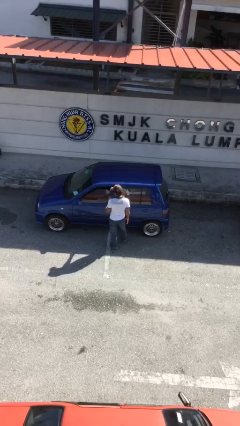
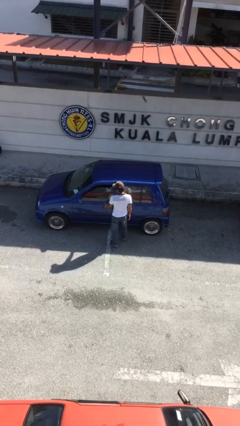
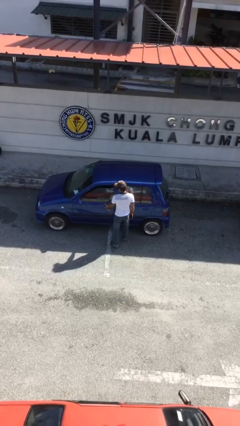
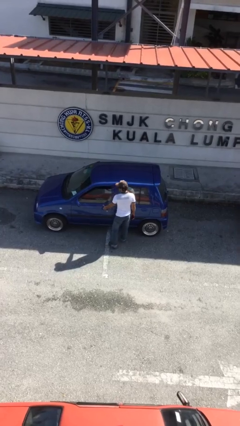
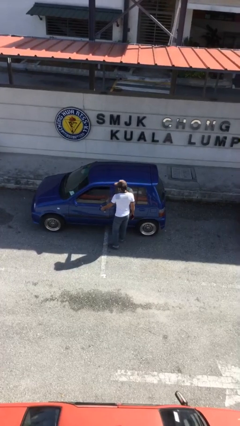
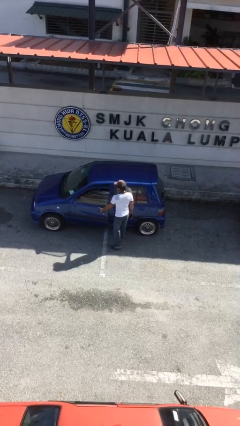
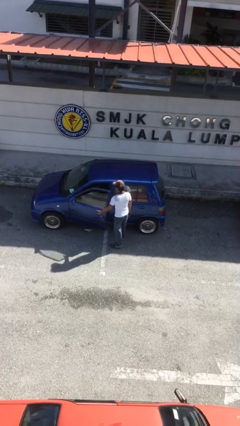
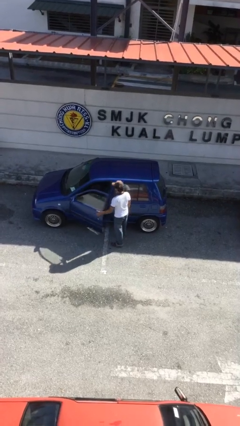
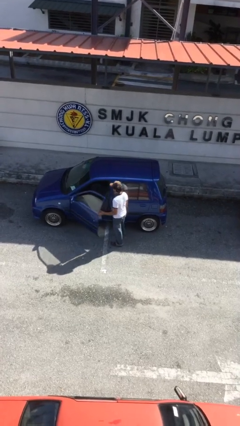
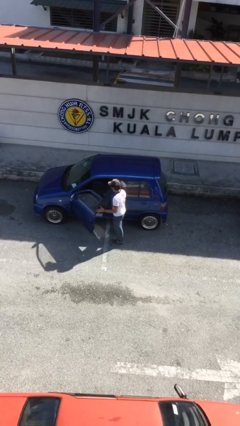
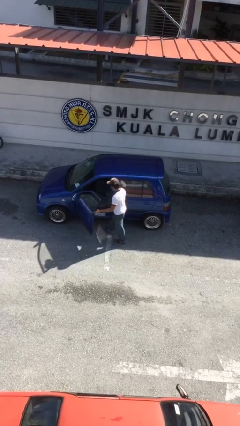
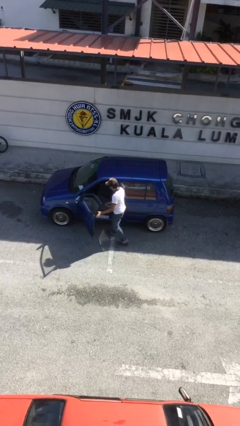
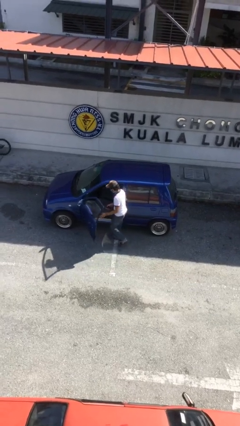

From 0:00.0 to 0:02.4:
person opens car door

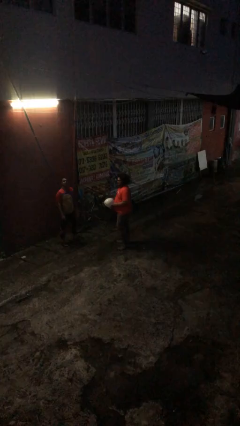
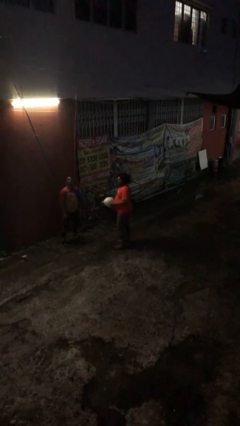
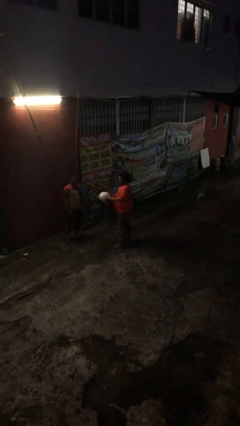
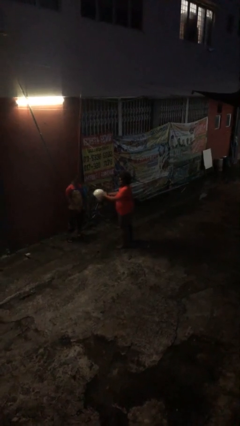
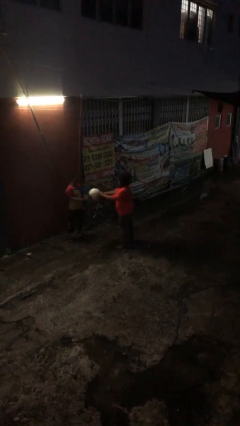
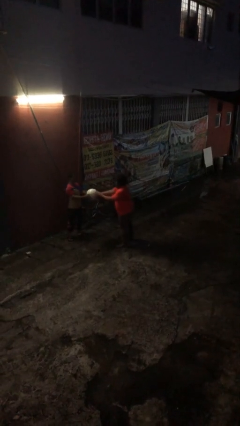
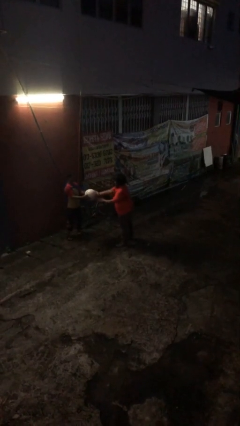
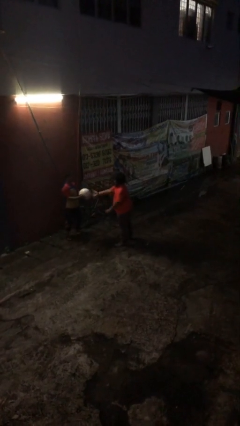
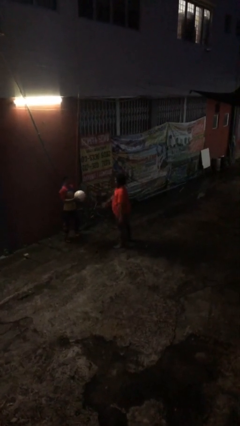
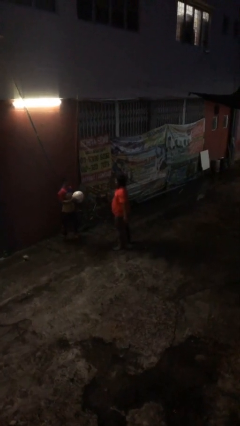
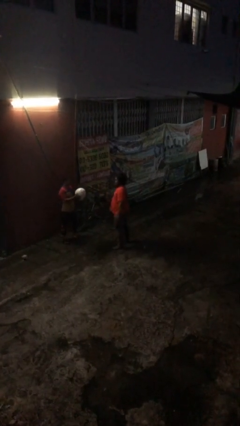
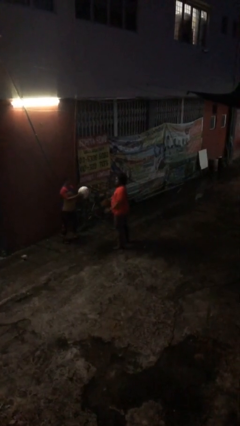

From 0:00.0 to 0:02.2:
person transfers object to person

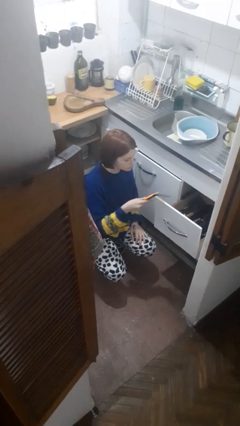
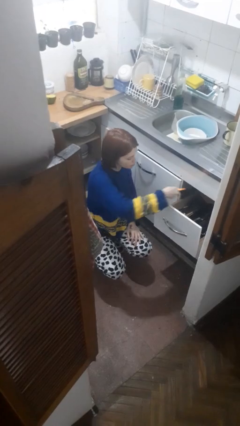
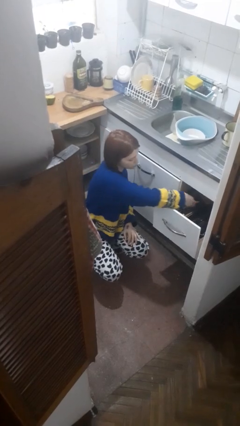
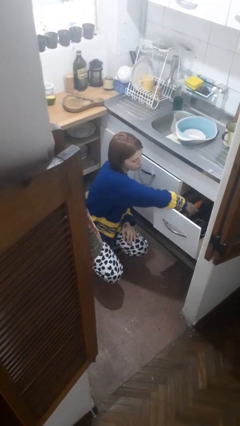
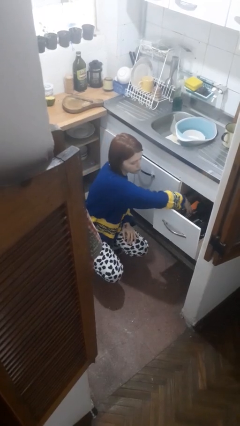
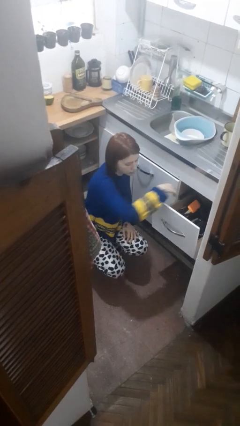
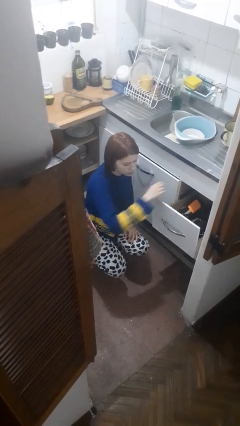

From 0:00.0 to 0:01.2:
person puts object into kitchen drawer

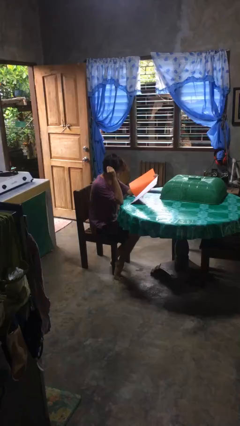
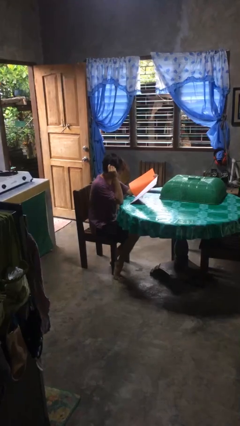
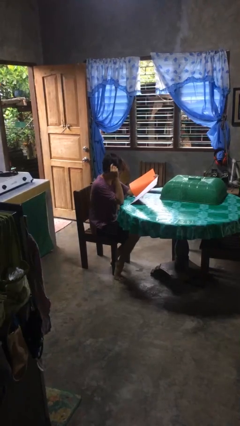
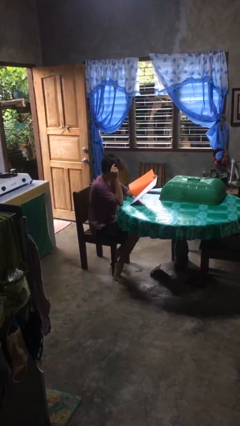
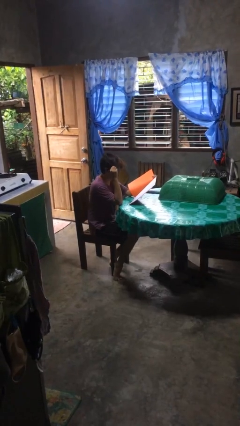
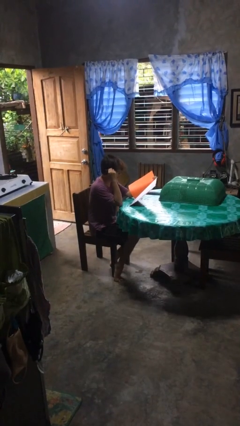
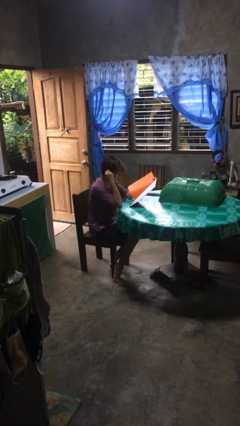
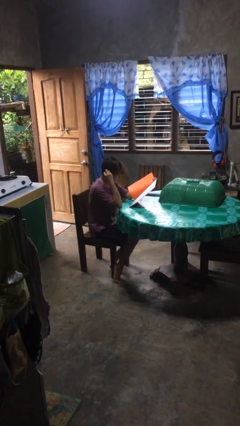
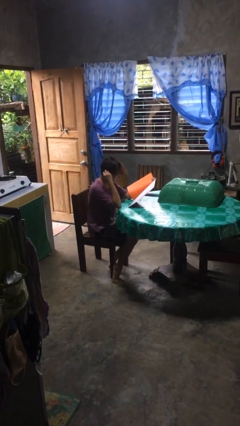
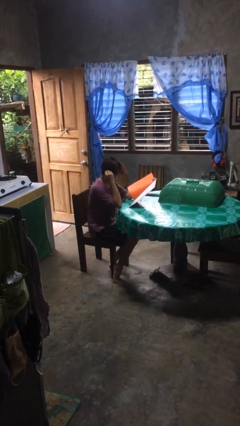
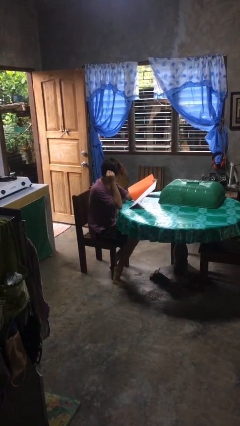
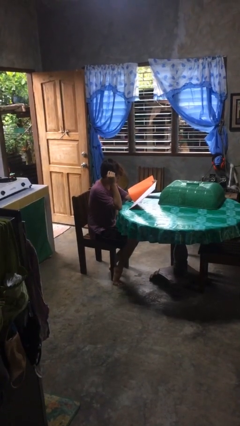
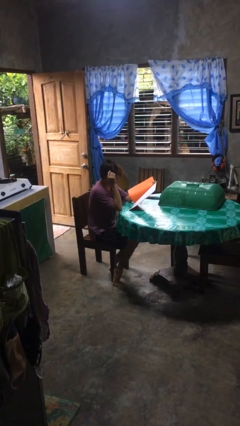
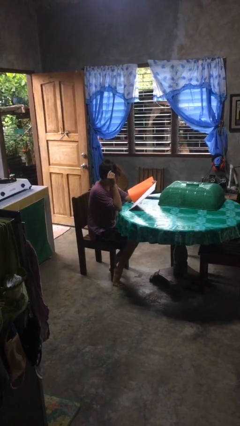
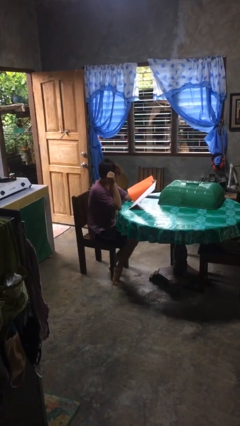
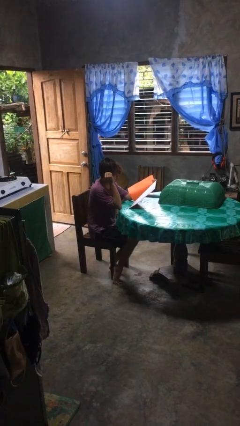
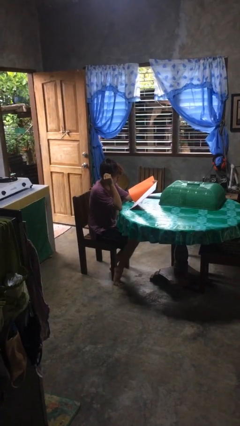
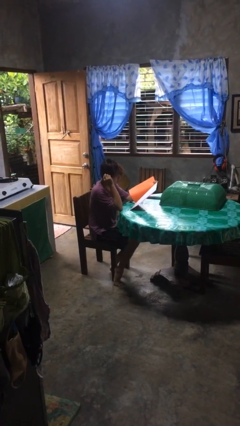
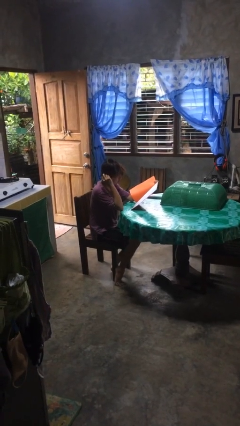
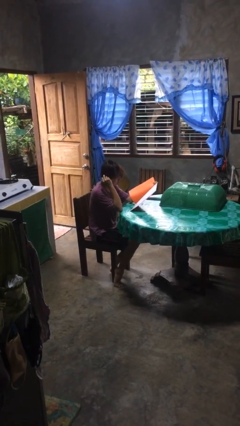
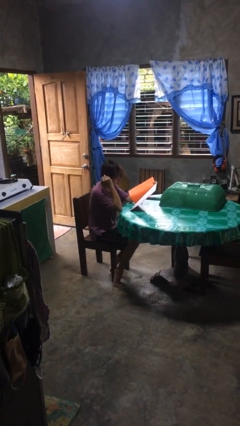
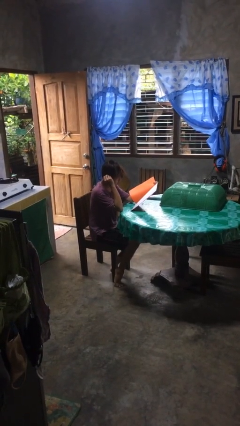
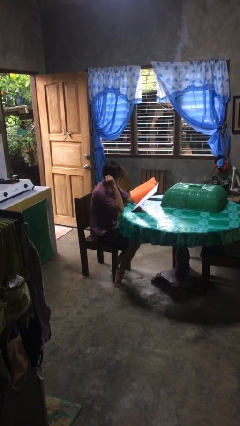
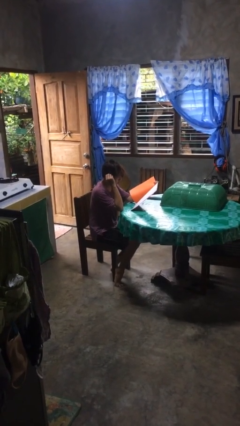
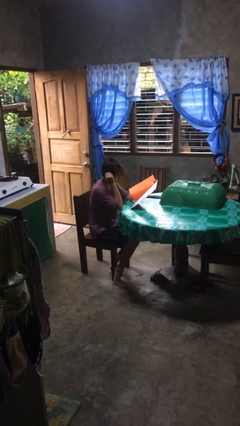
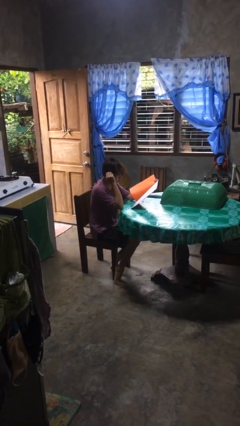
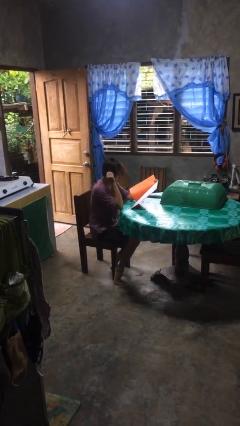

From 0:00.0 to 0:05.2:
person reads document

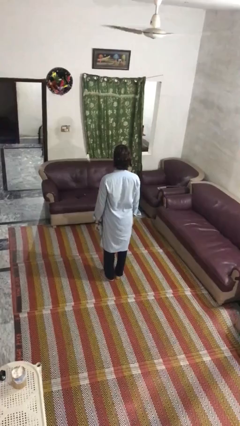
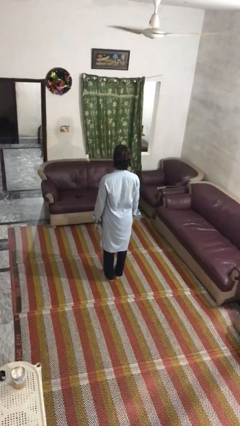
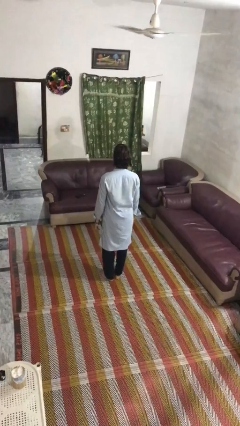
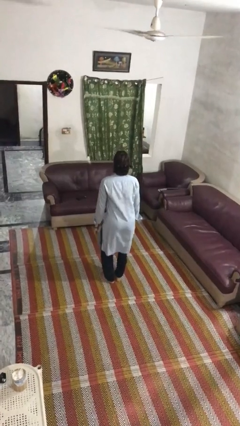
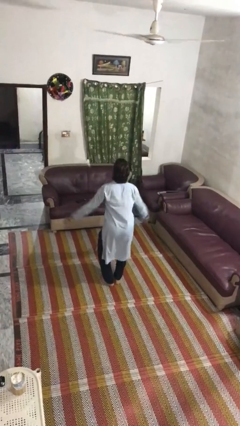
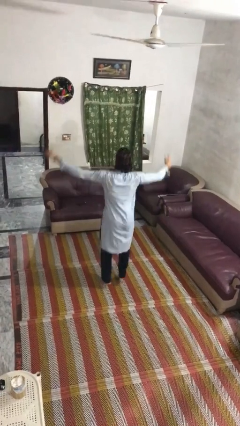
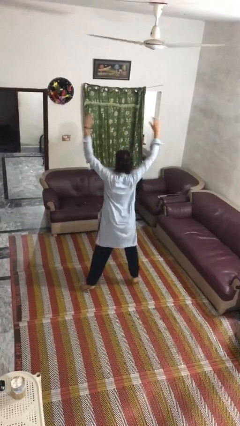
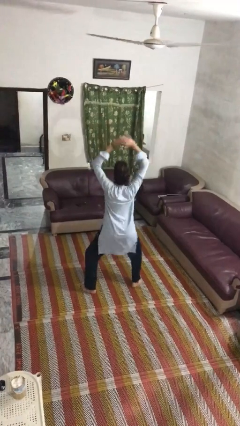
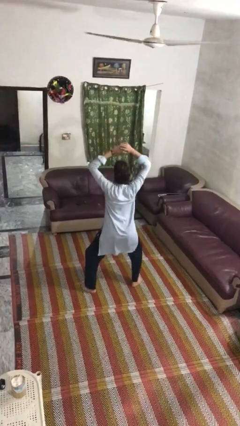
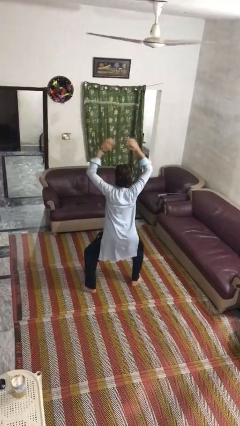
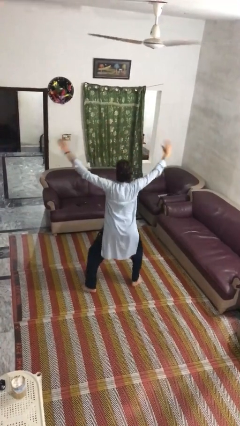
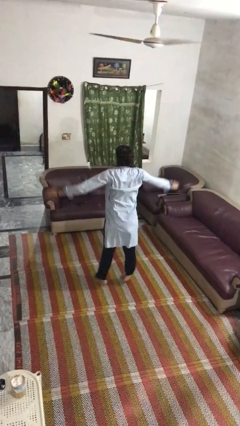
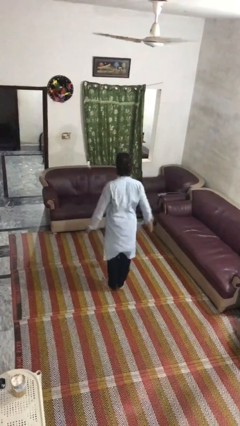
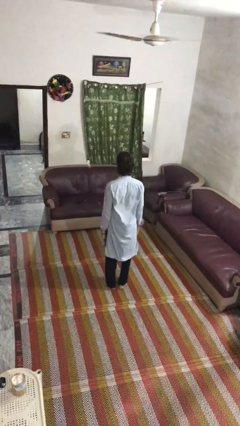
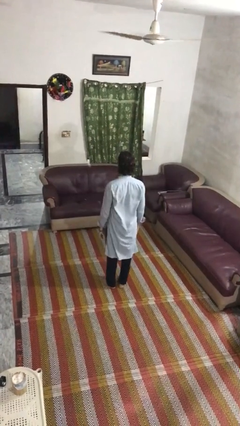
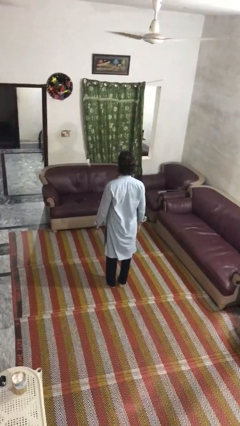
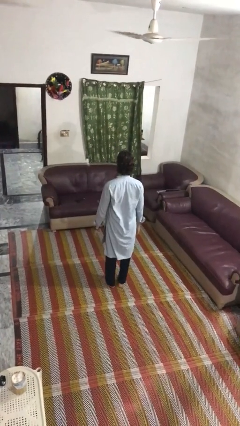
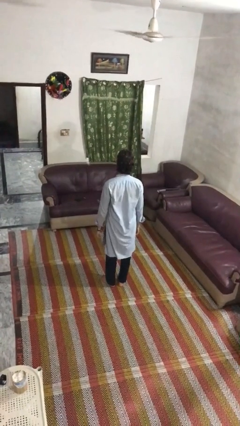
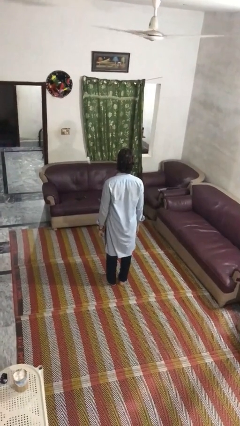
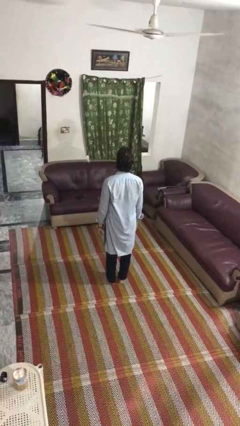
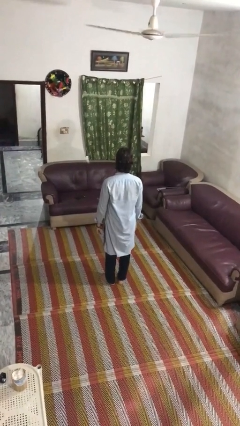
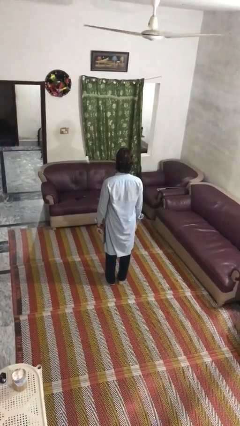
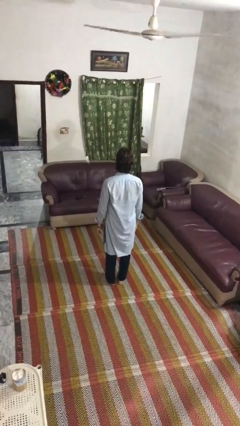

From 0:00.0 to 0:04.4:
person exercises with jumping jacks

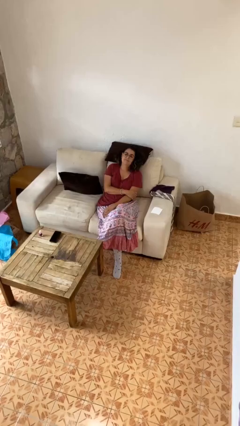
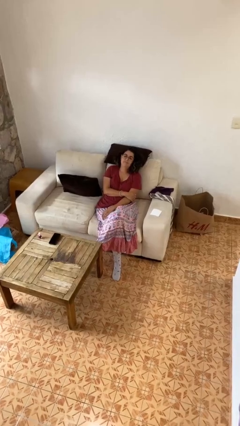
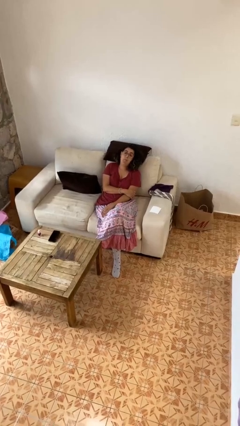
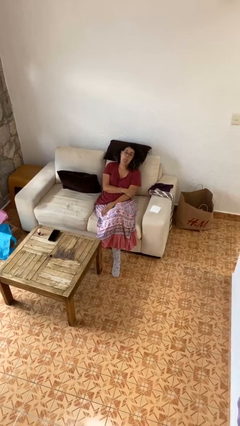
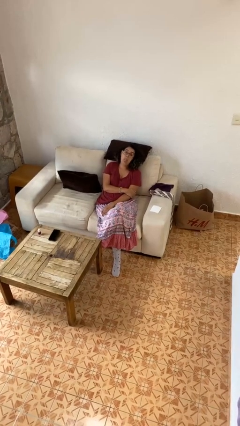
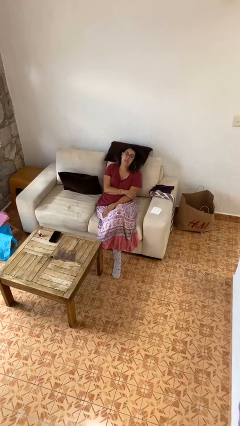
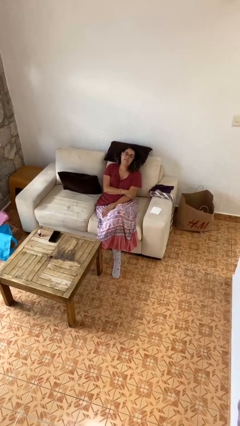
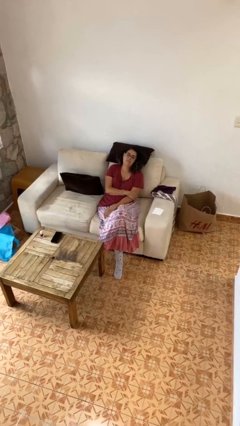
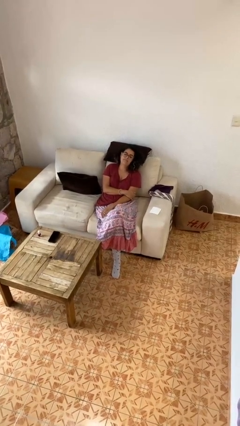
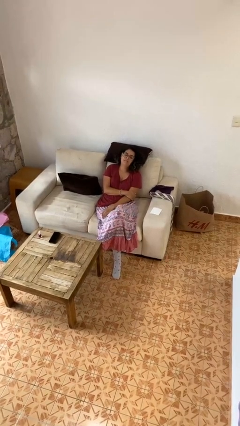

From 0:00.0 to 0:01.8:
person sticks out tongue
